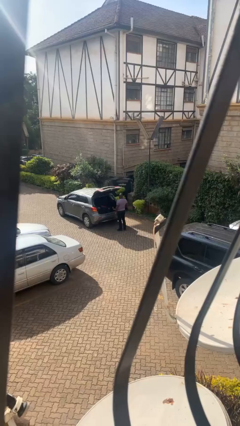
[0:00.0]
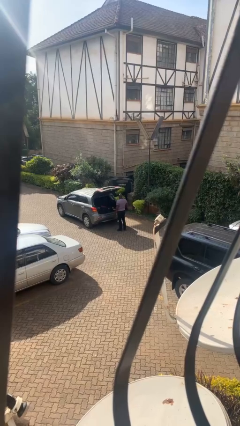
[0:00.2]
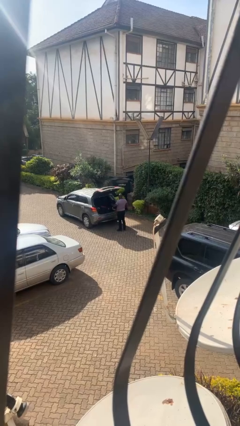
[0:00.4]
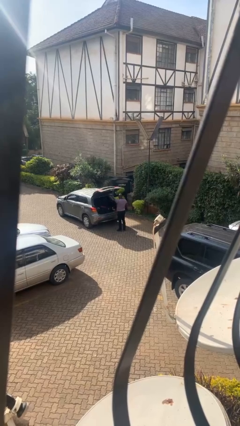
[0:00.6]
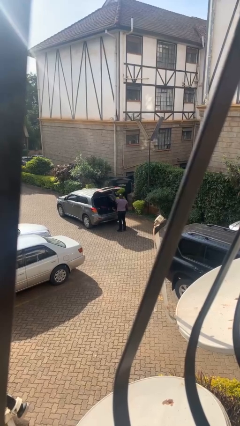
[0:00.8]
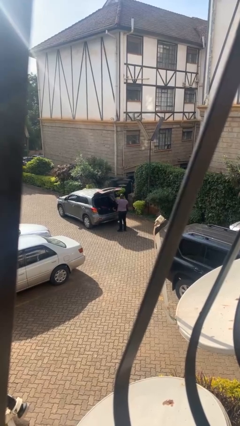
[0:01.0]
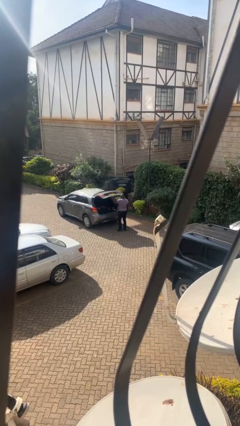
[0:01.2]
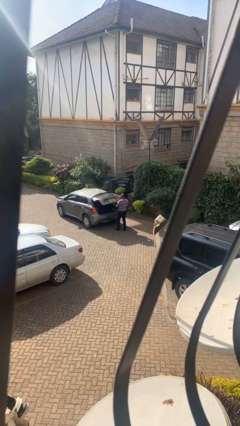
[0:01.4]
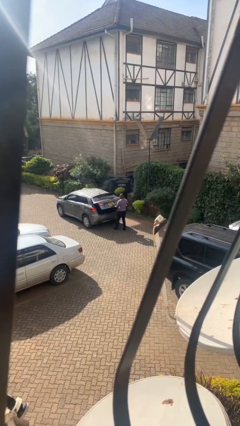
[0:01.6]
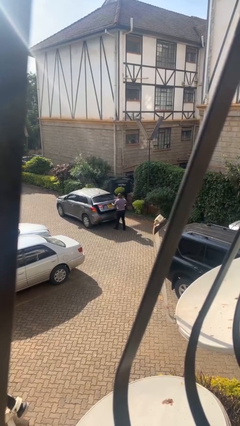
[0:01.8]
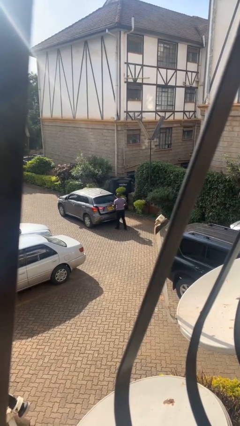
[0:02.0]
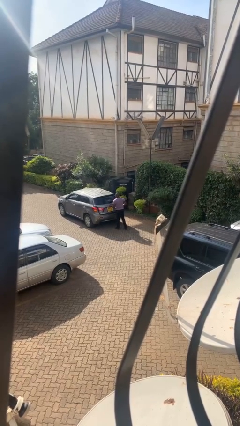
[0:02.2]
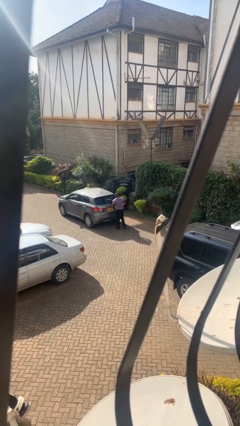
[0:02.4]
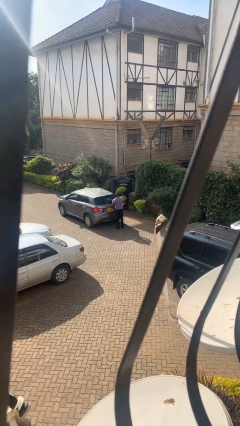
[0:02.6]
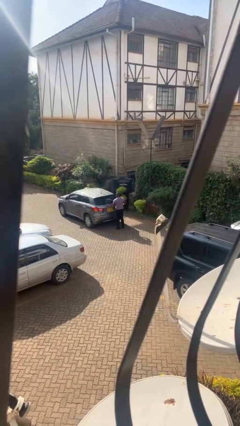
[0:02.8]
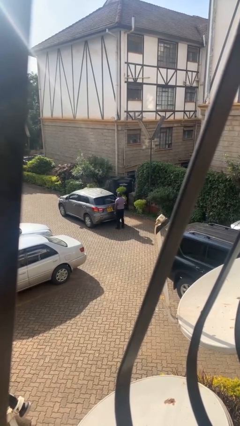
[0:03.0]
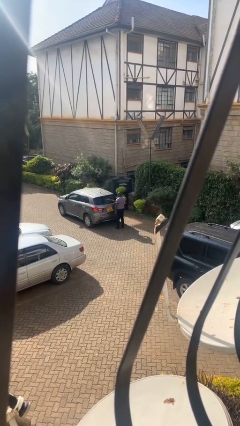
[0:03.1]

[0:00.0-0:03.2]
person closes car trunk

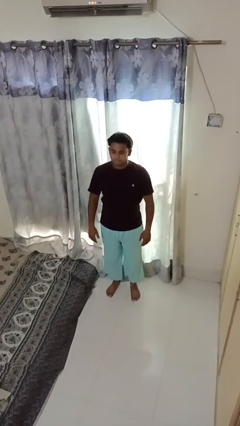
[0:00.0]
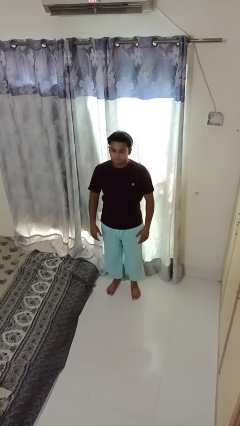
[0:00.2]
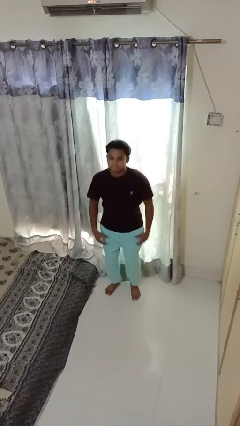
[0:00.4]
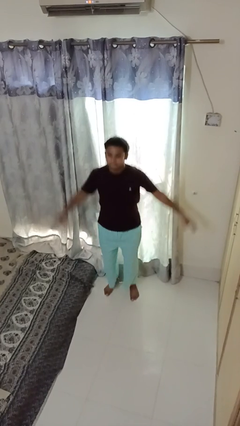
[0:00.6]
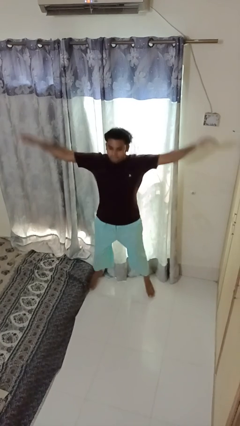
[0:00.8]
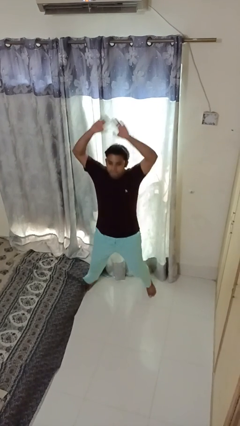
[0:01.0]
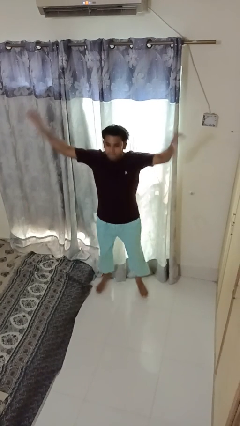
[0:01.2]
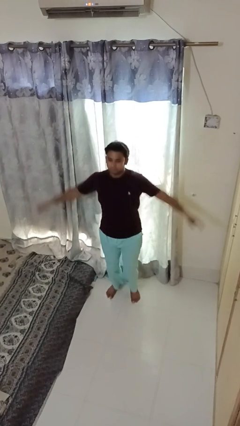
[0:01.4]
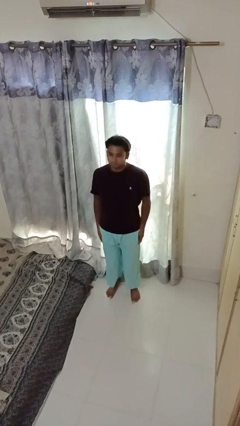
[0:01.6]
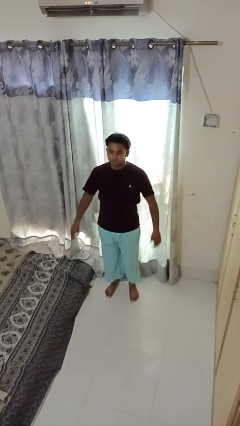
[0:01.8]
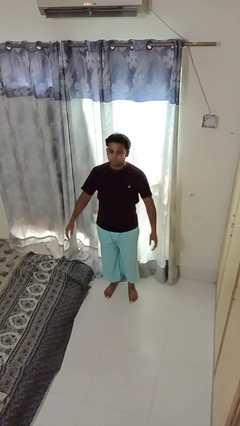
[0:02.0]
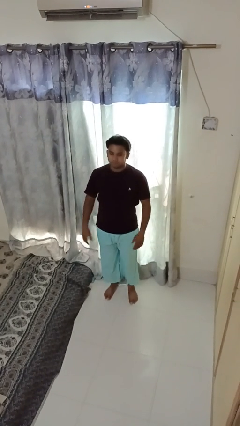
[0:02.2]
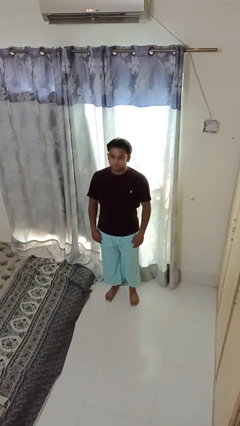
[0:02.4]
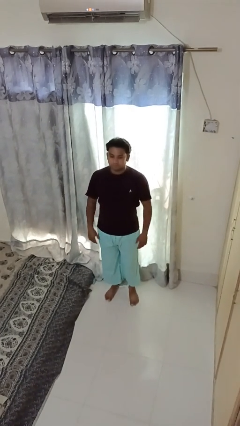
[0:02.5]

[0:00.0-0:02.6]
person exercises with jumping jacks

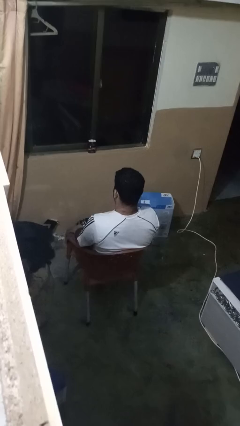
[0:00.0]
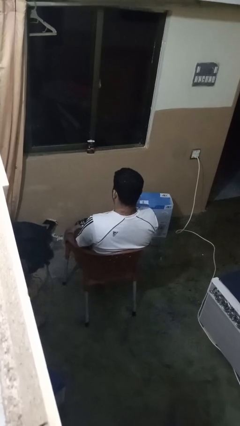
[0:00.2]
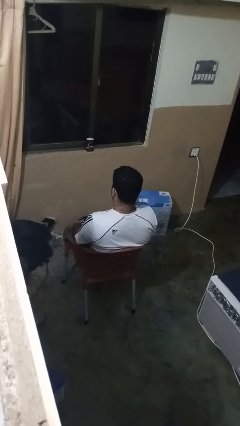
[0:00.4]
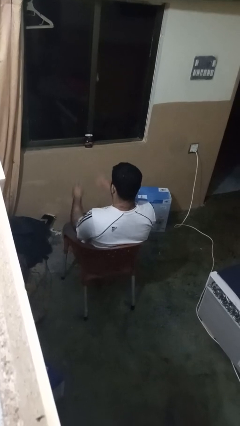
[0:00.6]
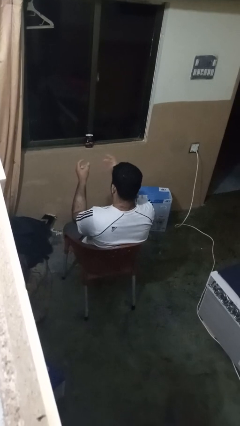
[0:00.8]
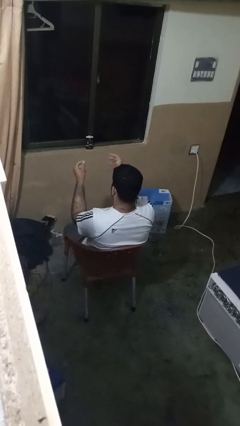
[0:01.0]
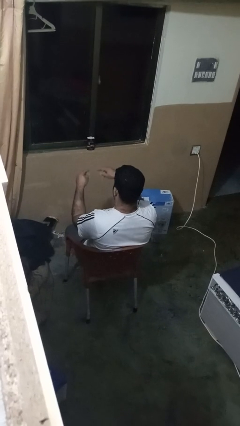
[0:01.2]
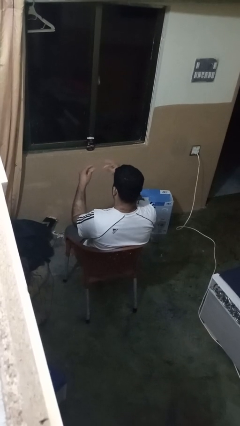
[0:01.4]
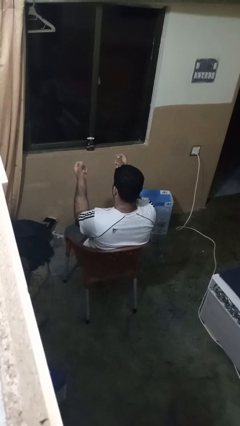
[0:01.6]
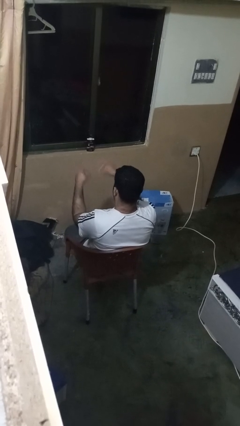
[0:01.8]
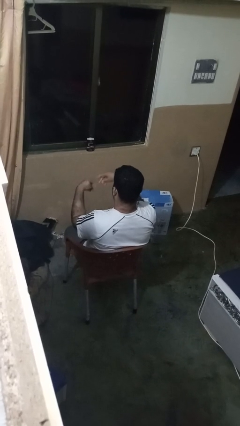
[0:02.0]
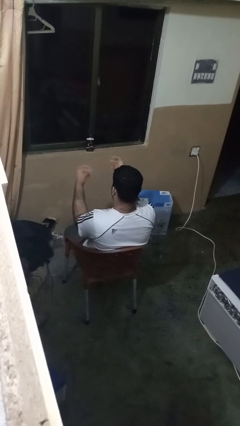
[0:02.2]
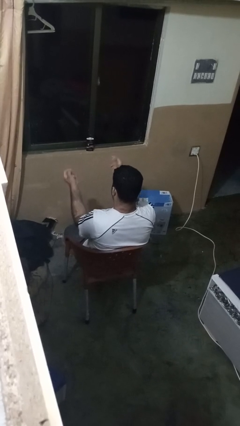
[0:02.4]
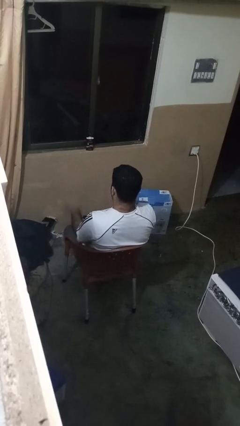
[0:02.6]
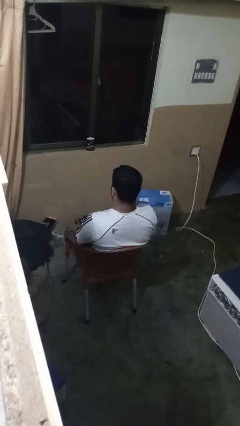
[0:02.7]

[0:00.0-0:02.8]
person snaps fingers

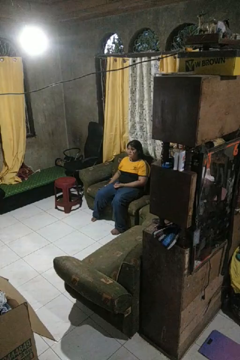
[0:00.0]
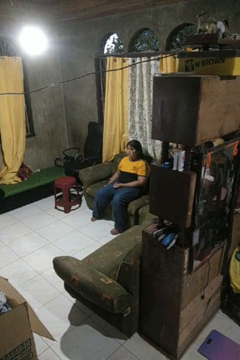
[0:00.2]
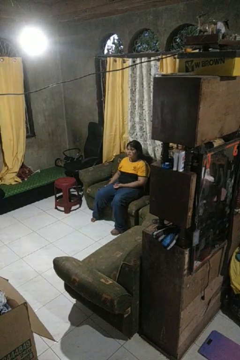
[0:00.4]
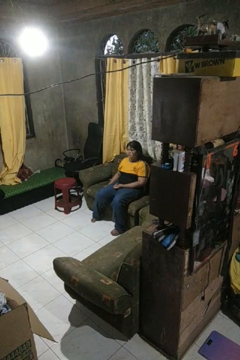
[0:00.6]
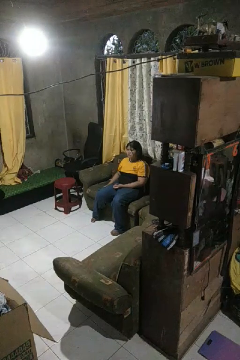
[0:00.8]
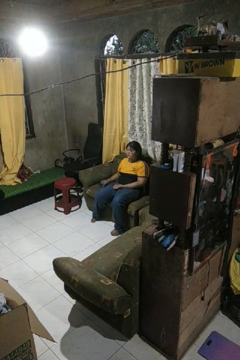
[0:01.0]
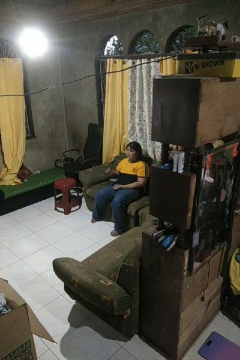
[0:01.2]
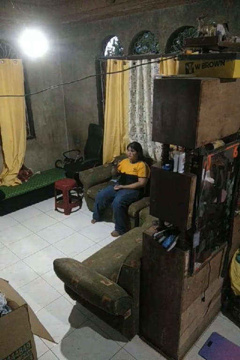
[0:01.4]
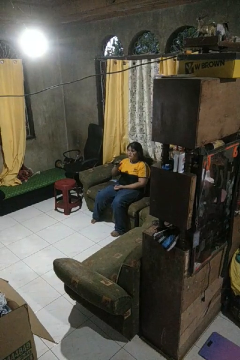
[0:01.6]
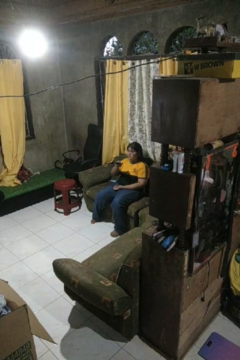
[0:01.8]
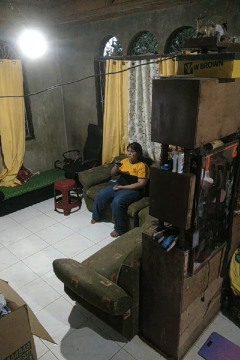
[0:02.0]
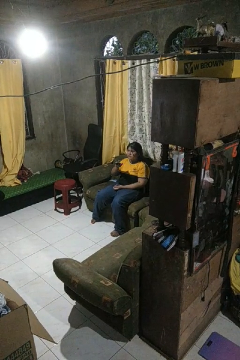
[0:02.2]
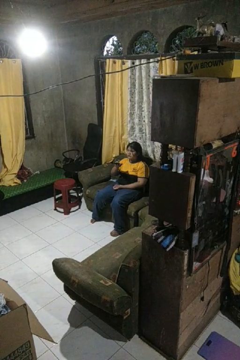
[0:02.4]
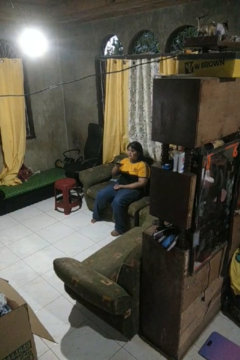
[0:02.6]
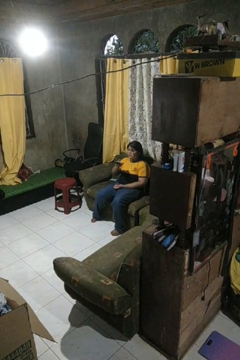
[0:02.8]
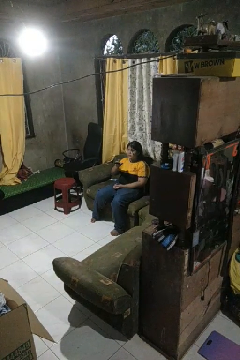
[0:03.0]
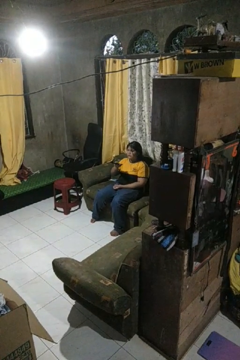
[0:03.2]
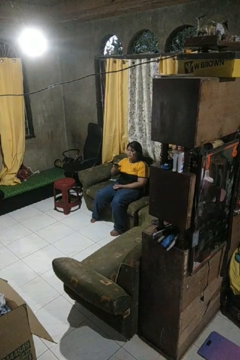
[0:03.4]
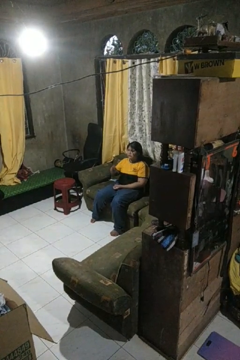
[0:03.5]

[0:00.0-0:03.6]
person uses television remote

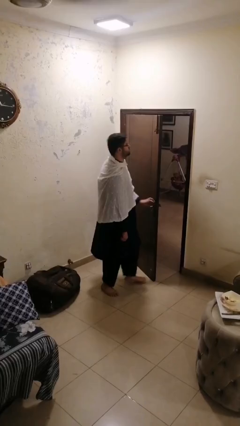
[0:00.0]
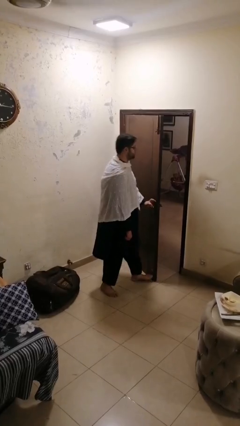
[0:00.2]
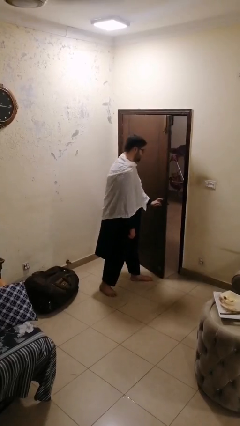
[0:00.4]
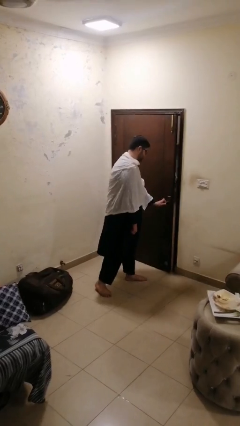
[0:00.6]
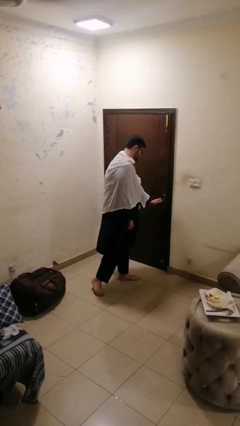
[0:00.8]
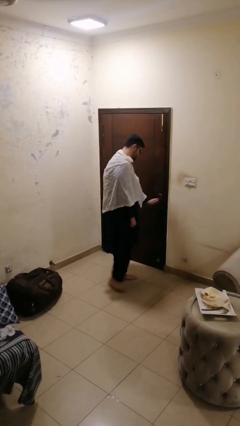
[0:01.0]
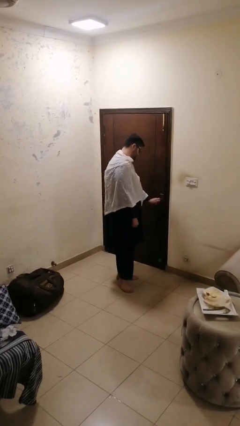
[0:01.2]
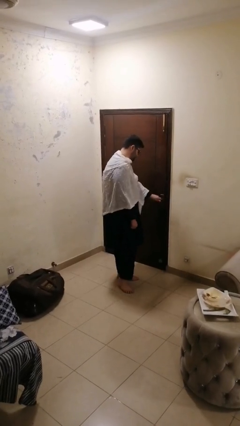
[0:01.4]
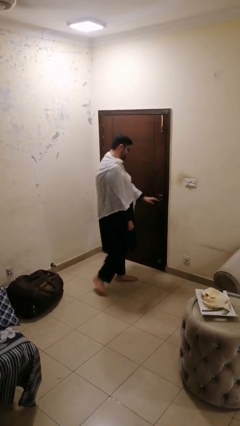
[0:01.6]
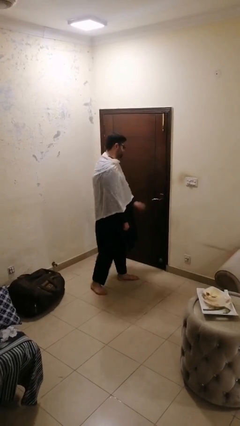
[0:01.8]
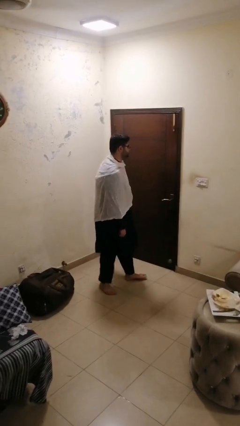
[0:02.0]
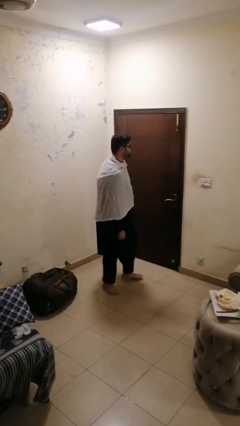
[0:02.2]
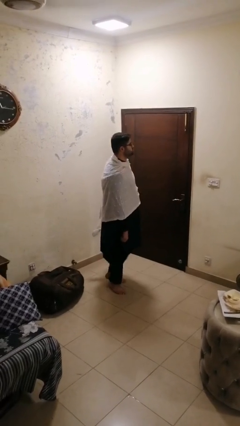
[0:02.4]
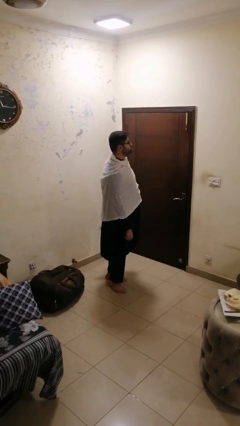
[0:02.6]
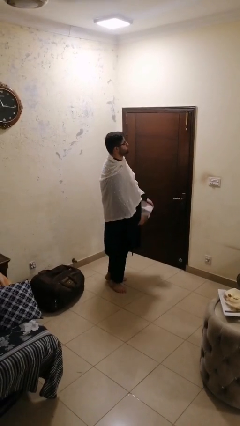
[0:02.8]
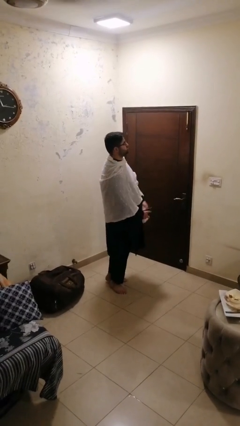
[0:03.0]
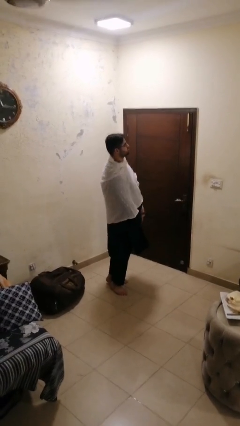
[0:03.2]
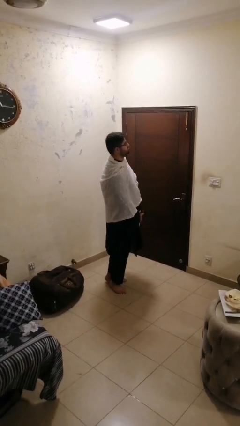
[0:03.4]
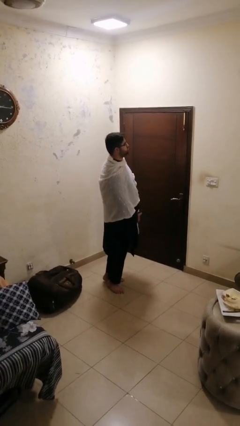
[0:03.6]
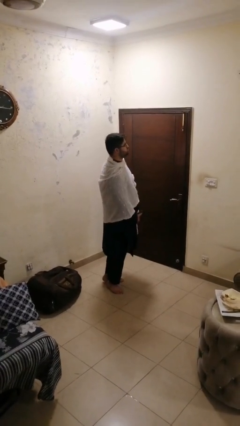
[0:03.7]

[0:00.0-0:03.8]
person closes facility door

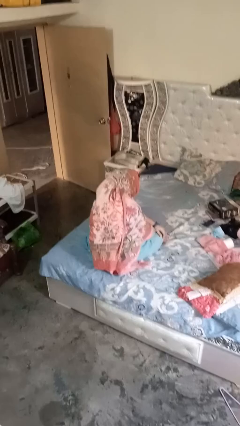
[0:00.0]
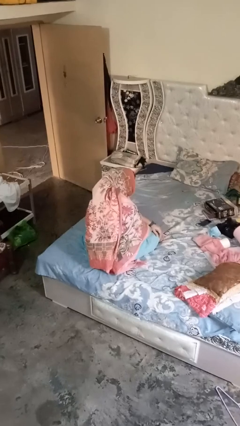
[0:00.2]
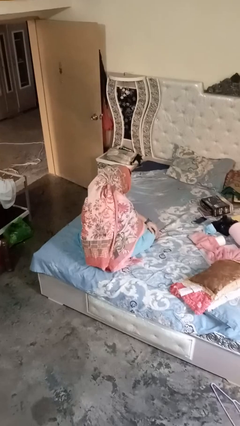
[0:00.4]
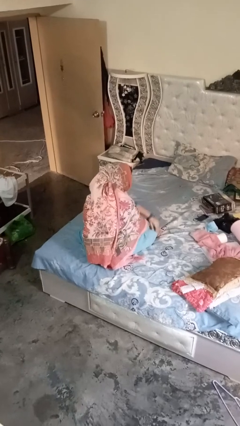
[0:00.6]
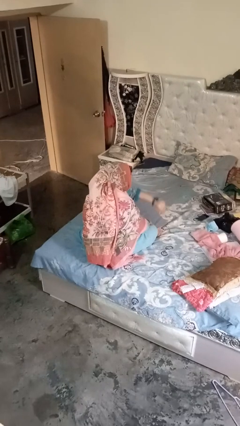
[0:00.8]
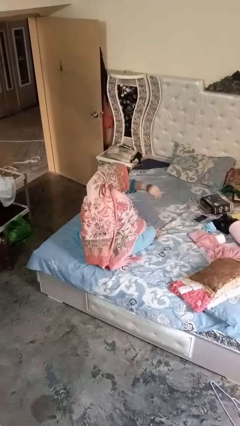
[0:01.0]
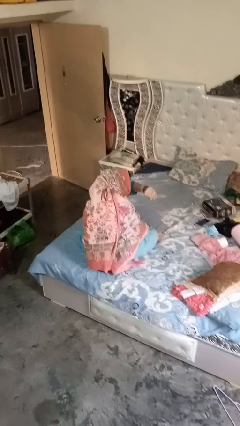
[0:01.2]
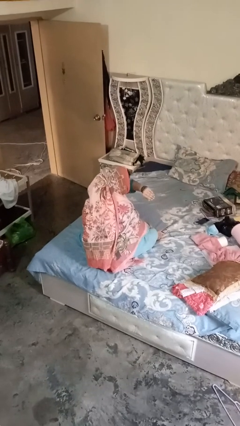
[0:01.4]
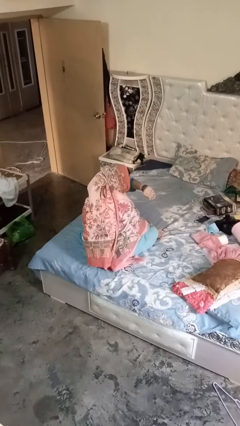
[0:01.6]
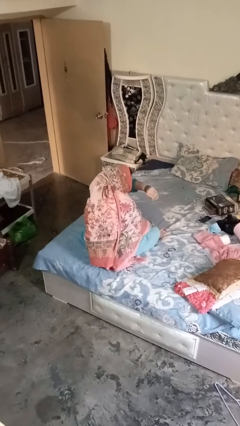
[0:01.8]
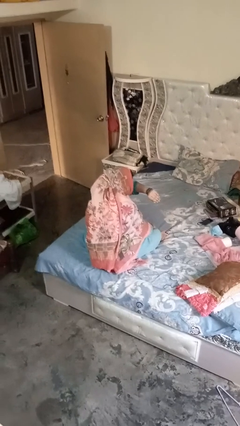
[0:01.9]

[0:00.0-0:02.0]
person gestures watch closely
